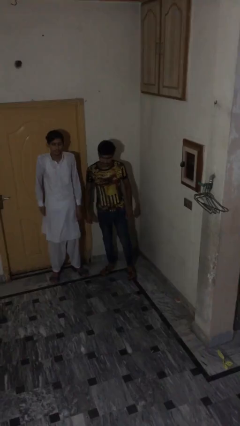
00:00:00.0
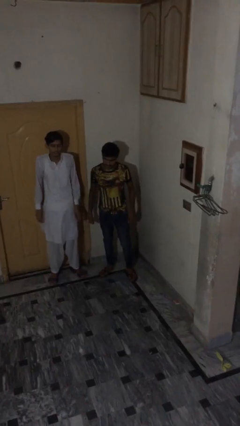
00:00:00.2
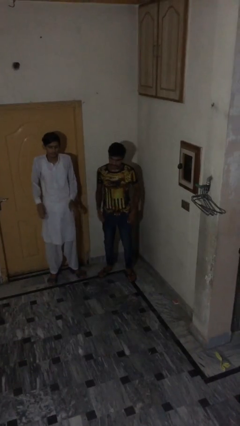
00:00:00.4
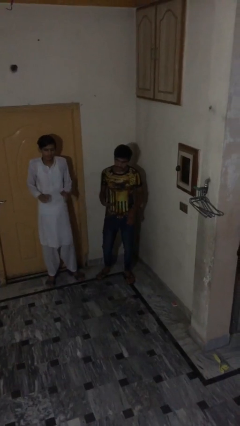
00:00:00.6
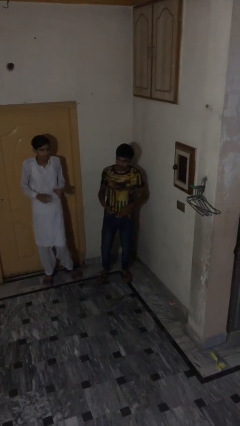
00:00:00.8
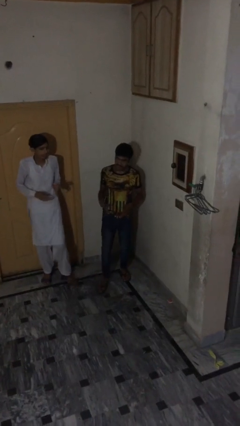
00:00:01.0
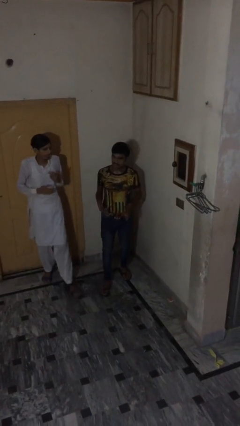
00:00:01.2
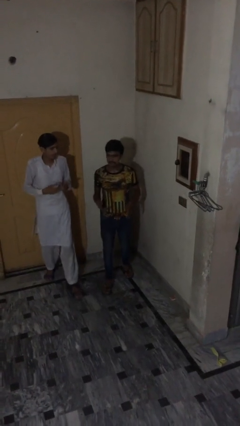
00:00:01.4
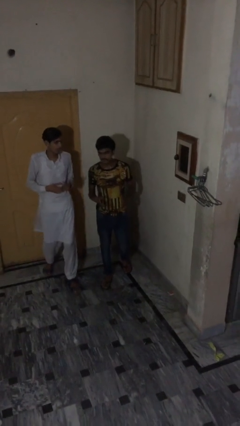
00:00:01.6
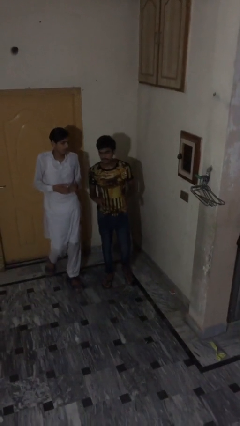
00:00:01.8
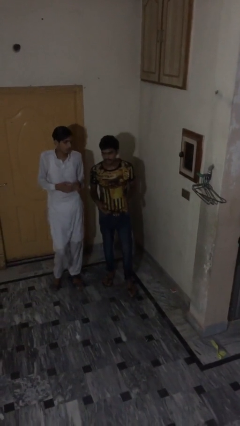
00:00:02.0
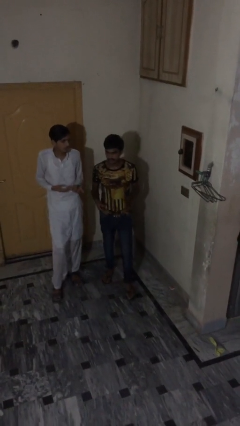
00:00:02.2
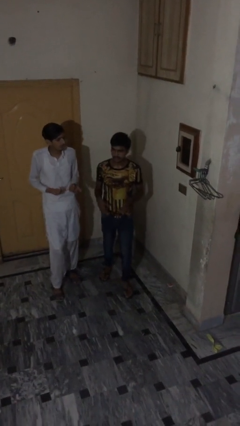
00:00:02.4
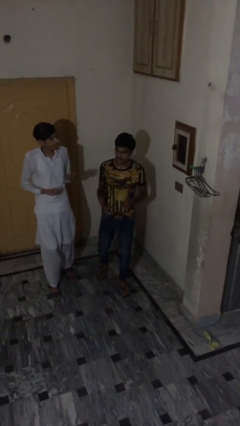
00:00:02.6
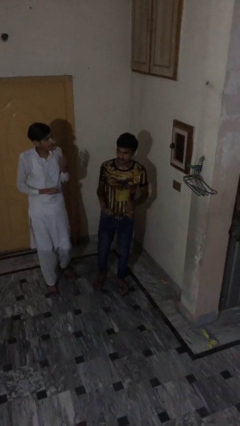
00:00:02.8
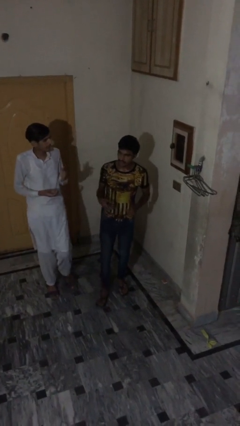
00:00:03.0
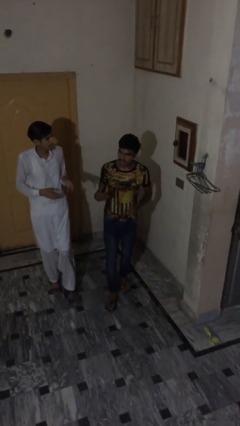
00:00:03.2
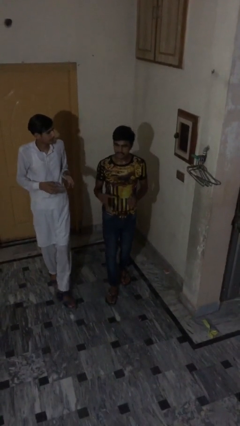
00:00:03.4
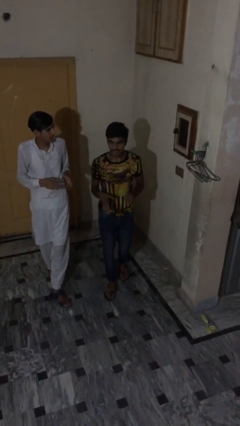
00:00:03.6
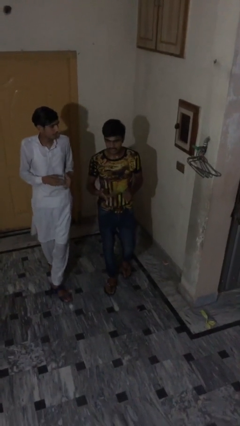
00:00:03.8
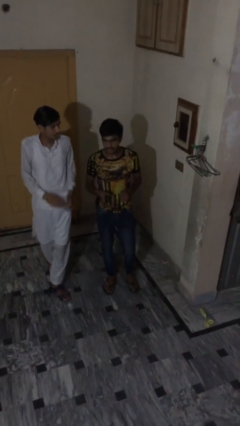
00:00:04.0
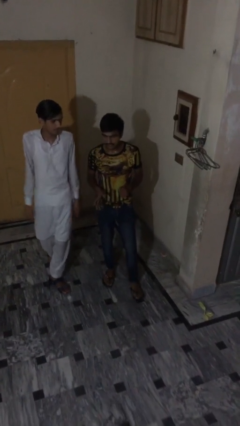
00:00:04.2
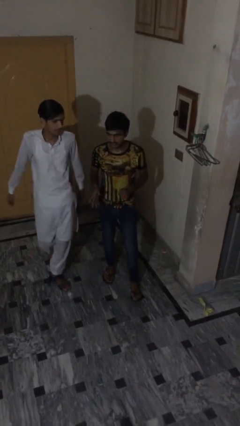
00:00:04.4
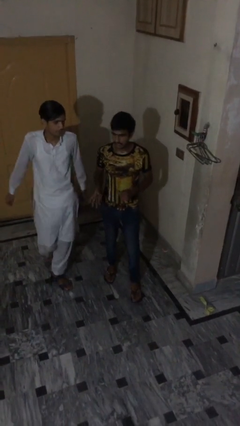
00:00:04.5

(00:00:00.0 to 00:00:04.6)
person talks to person

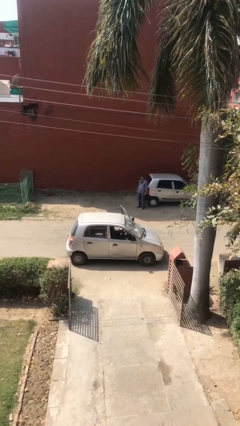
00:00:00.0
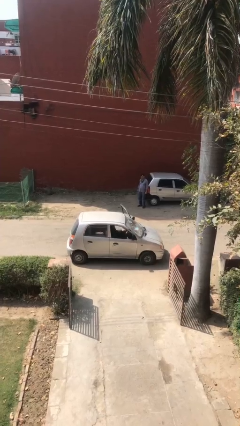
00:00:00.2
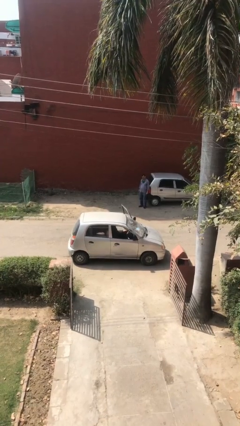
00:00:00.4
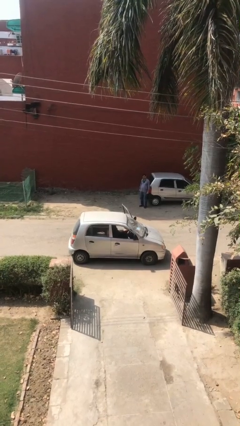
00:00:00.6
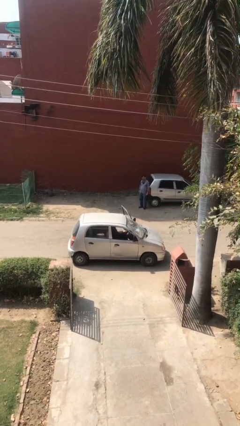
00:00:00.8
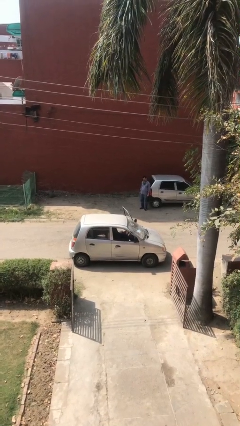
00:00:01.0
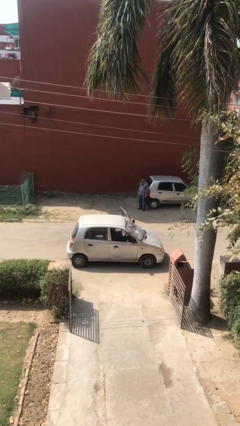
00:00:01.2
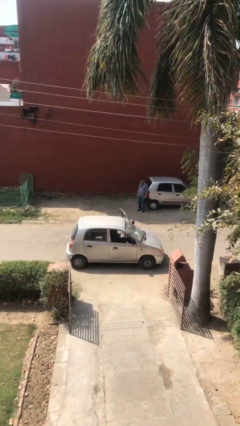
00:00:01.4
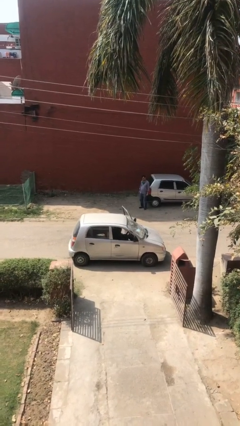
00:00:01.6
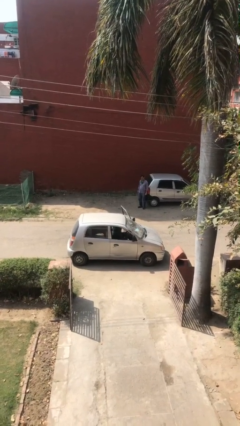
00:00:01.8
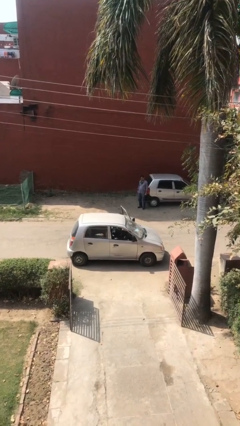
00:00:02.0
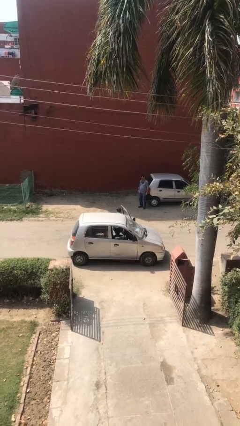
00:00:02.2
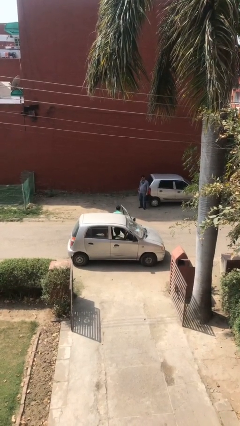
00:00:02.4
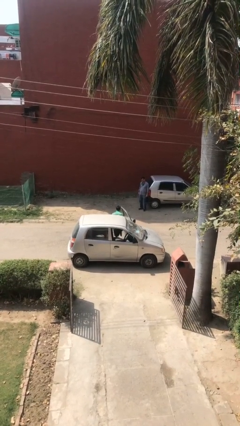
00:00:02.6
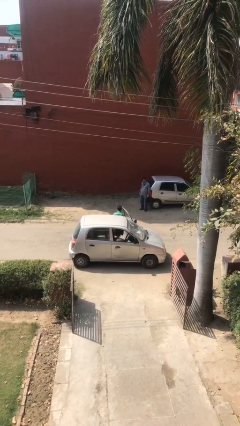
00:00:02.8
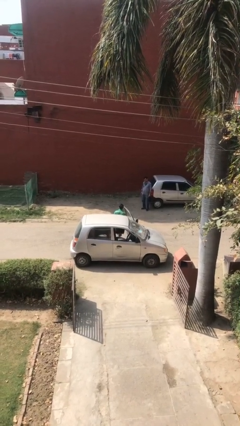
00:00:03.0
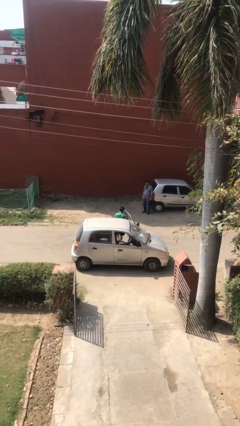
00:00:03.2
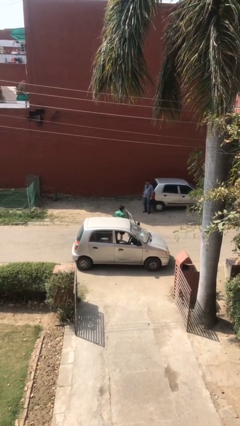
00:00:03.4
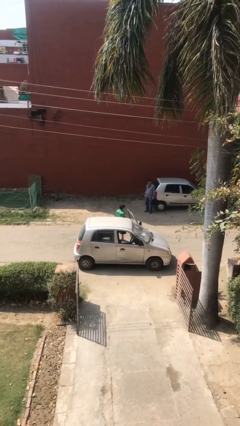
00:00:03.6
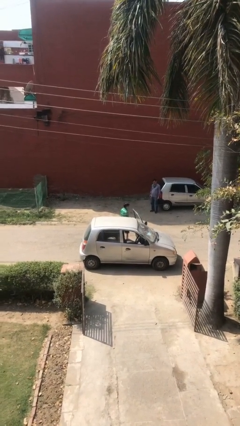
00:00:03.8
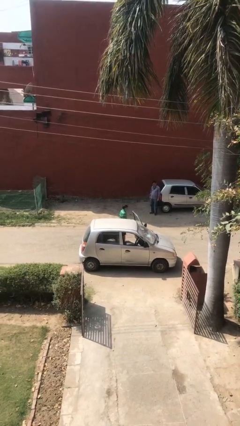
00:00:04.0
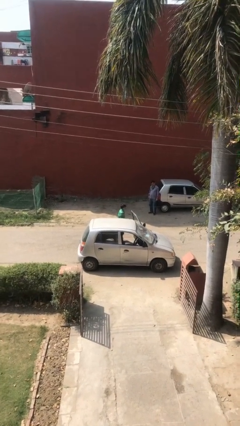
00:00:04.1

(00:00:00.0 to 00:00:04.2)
person exits car

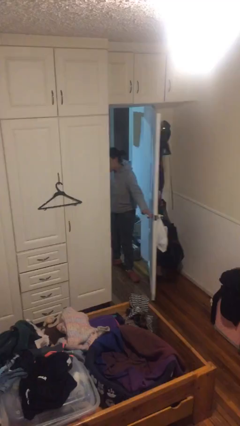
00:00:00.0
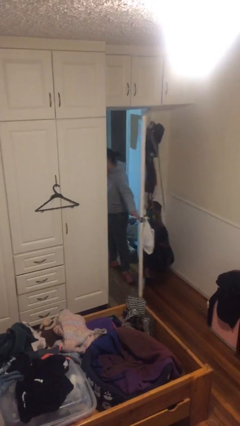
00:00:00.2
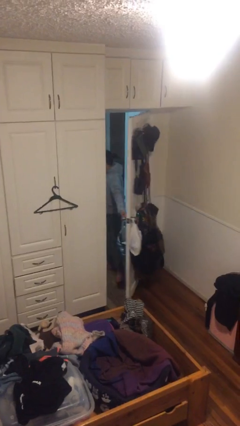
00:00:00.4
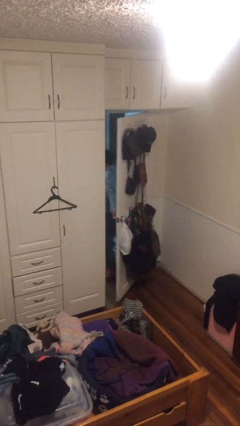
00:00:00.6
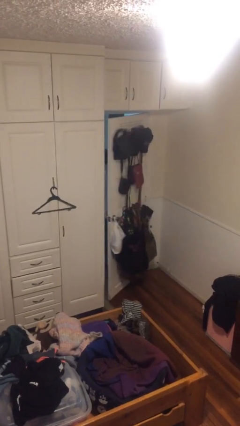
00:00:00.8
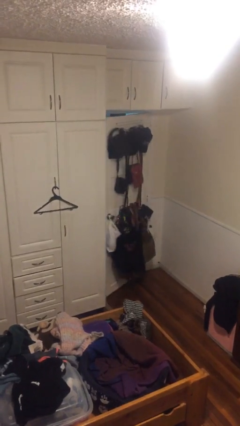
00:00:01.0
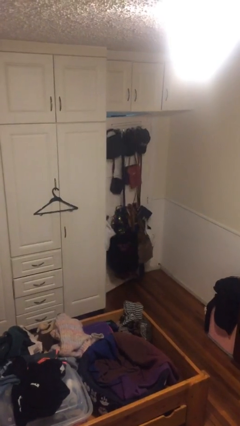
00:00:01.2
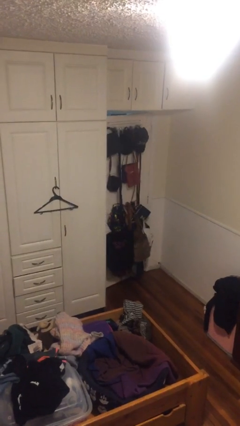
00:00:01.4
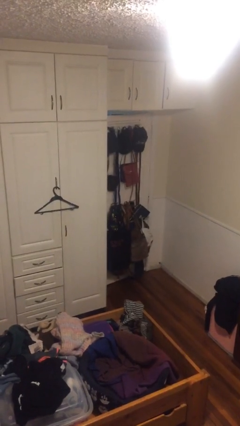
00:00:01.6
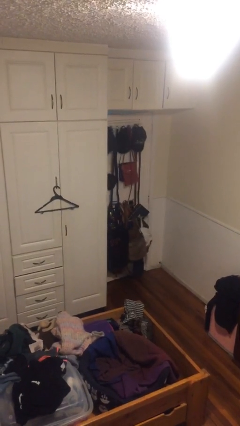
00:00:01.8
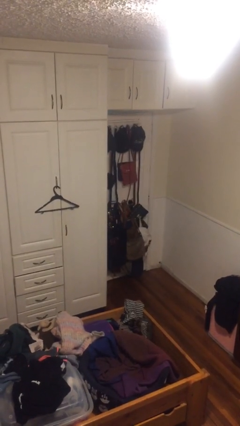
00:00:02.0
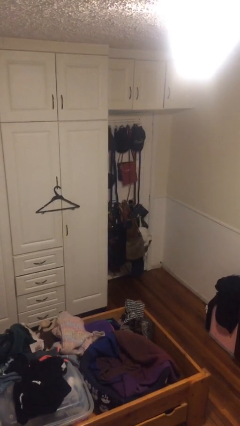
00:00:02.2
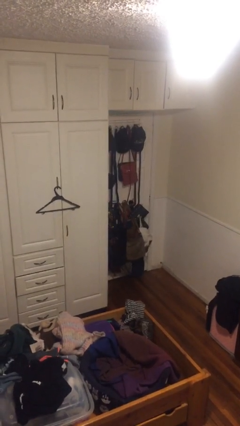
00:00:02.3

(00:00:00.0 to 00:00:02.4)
person closes facility door

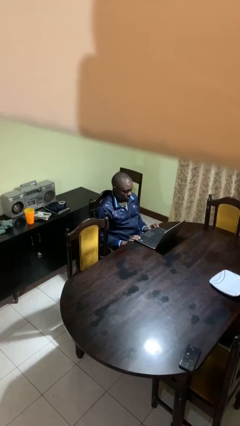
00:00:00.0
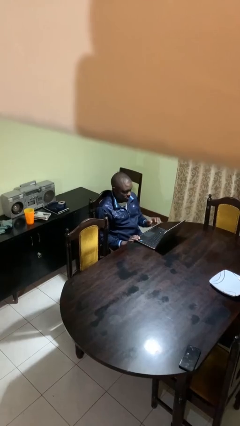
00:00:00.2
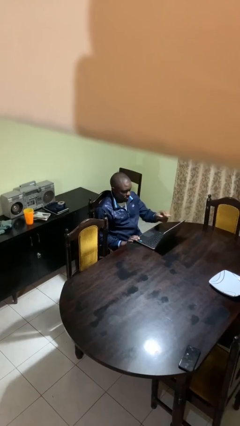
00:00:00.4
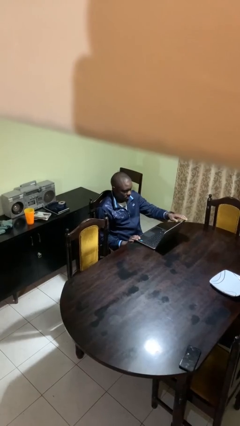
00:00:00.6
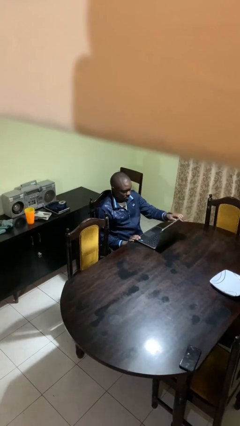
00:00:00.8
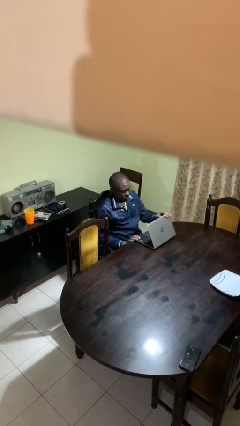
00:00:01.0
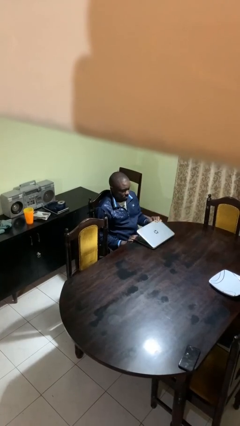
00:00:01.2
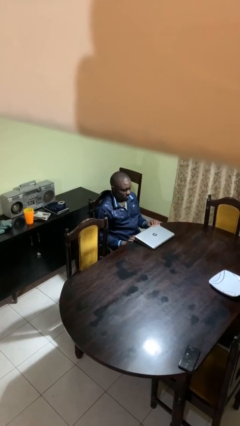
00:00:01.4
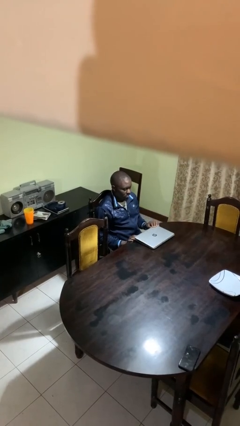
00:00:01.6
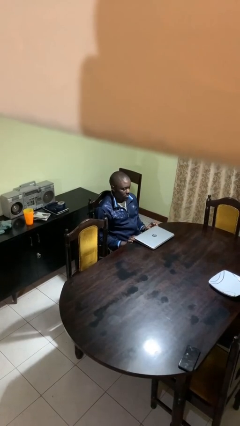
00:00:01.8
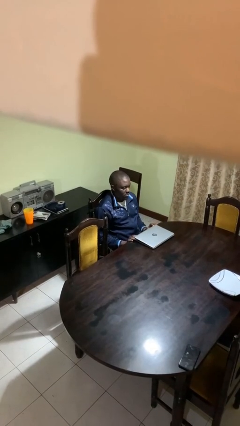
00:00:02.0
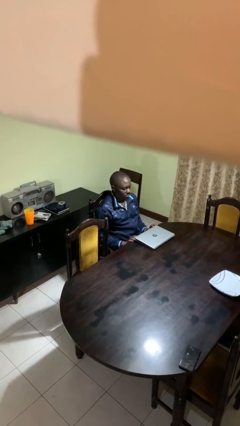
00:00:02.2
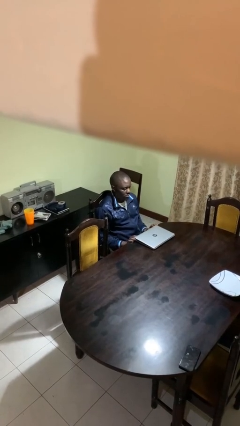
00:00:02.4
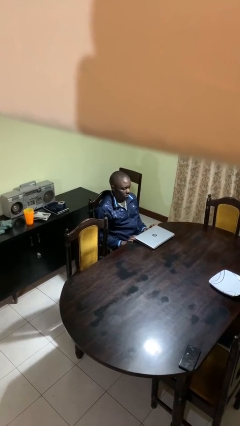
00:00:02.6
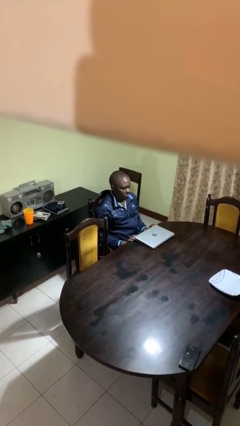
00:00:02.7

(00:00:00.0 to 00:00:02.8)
person closes laptop

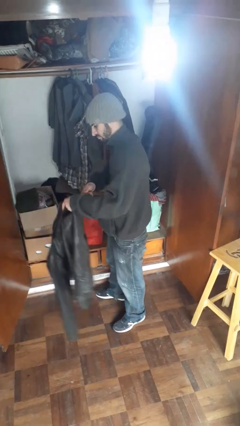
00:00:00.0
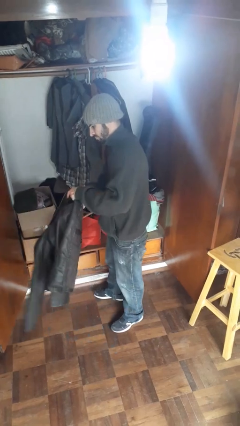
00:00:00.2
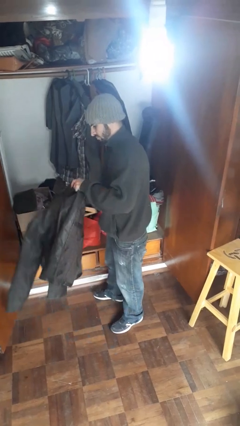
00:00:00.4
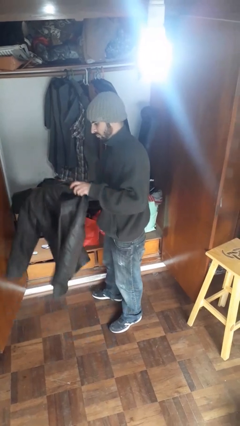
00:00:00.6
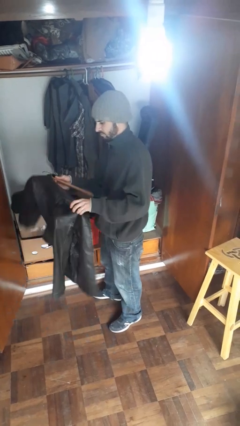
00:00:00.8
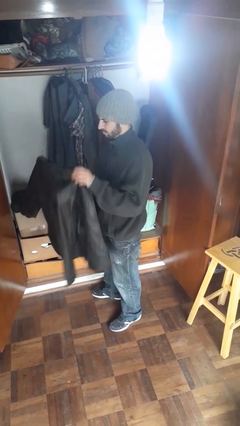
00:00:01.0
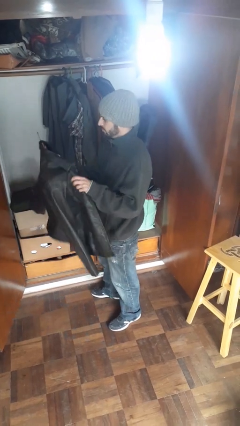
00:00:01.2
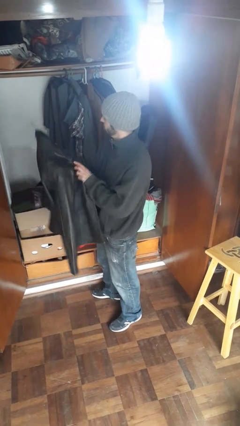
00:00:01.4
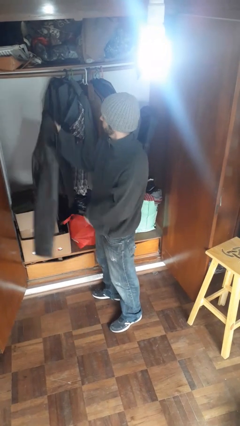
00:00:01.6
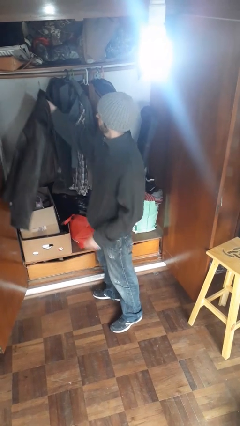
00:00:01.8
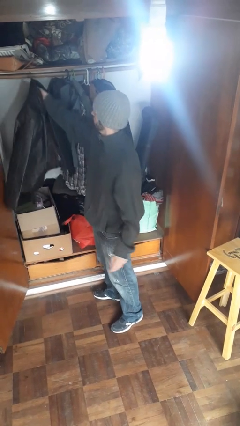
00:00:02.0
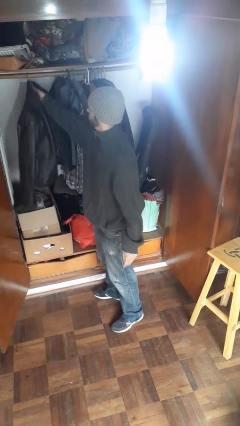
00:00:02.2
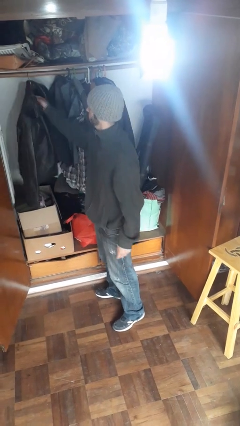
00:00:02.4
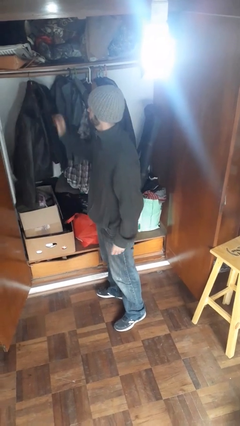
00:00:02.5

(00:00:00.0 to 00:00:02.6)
person puts clothes into closet

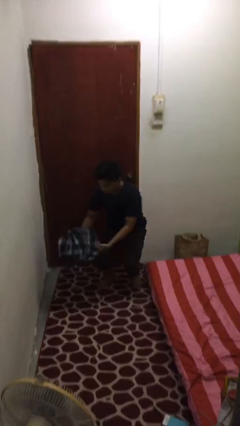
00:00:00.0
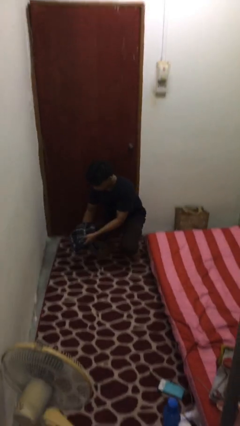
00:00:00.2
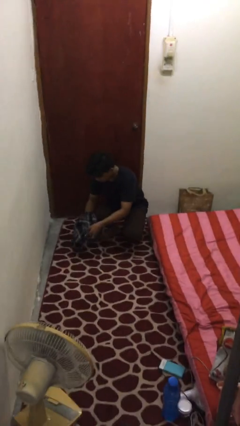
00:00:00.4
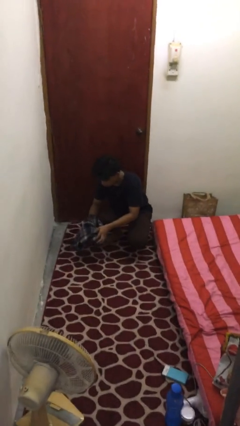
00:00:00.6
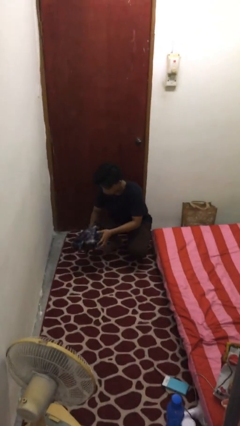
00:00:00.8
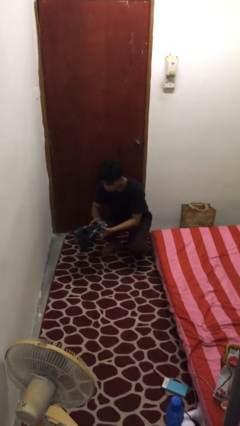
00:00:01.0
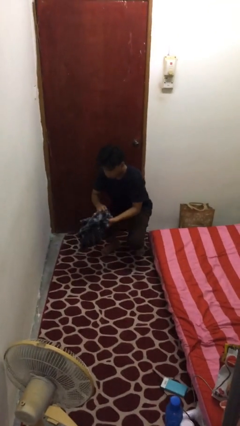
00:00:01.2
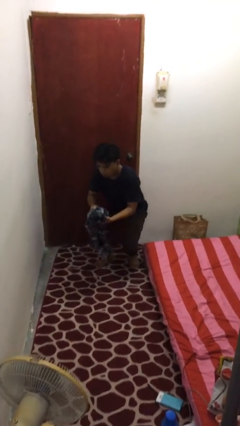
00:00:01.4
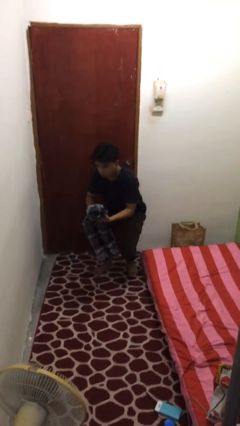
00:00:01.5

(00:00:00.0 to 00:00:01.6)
person catches dropped object
